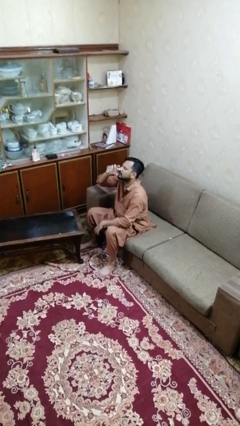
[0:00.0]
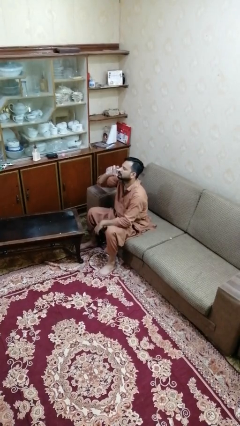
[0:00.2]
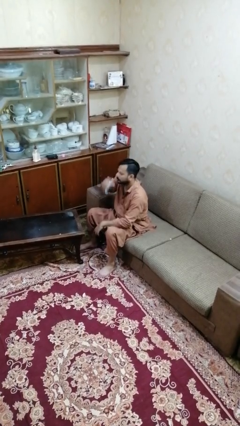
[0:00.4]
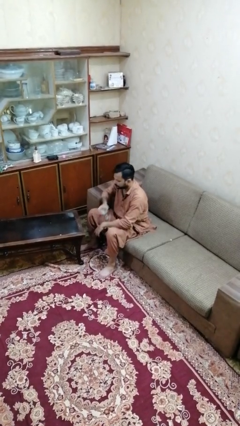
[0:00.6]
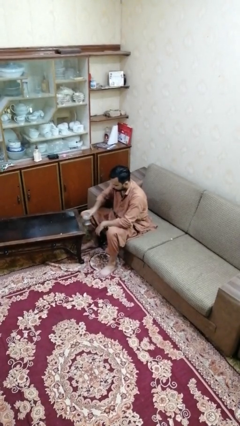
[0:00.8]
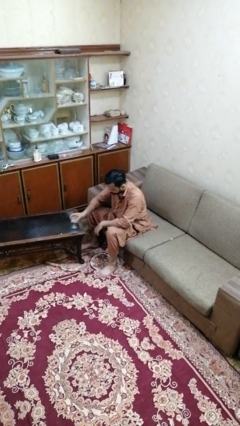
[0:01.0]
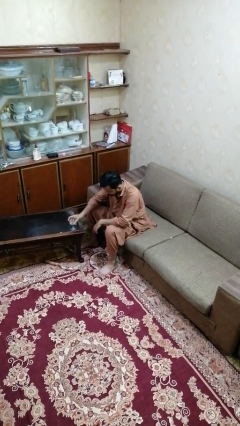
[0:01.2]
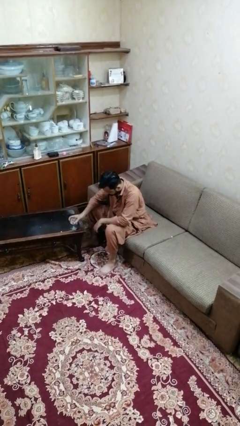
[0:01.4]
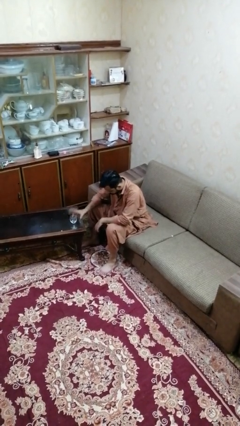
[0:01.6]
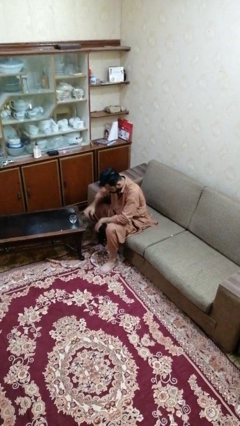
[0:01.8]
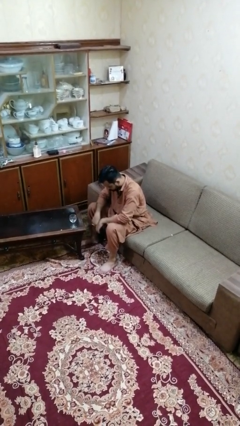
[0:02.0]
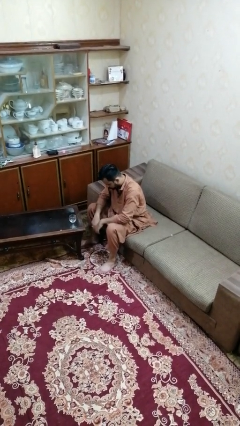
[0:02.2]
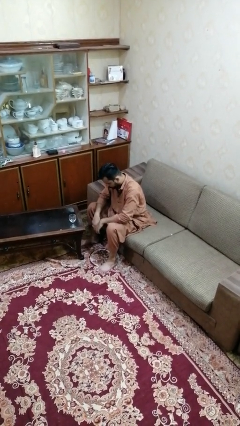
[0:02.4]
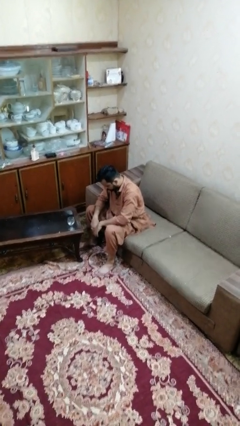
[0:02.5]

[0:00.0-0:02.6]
person puts down object on table

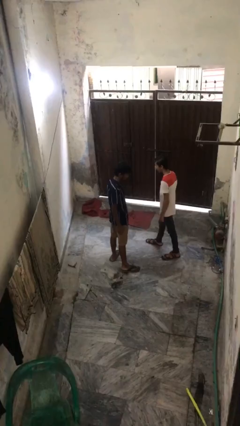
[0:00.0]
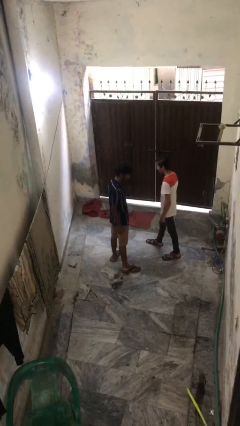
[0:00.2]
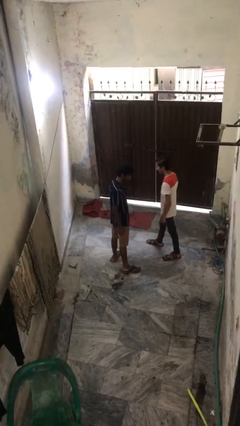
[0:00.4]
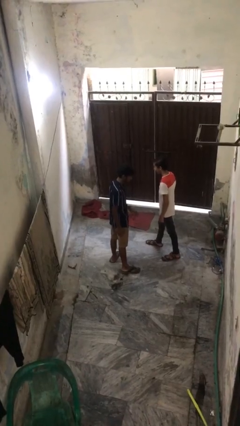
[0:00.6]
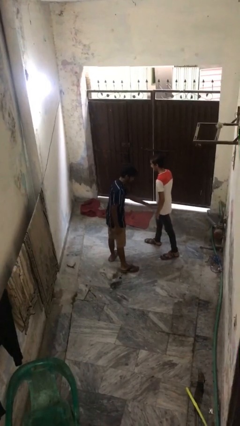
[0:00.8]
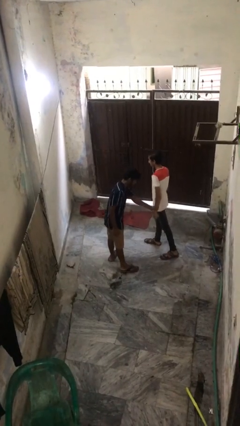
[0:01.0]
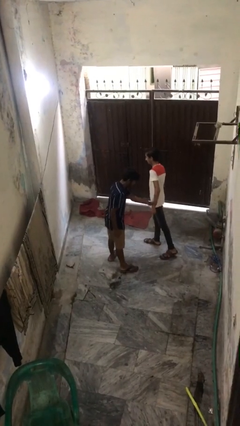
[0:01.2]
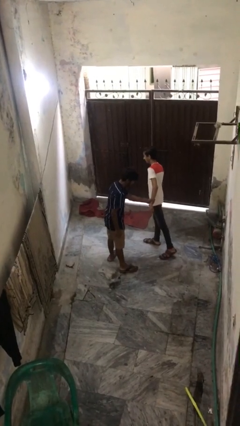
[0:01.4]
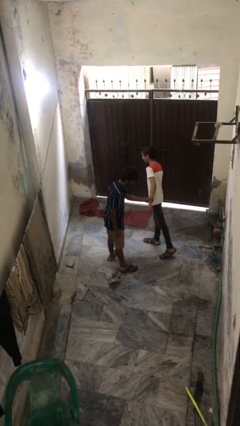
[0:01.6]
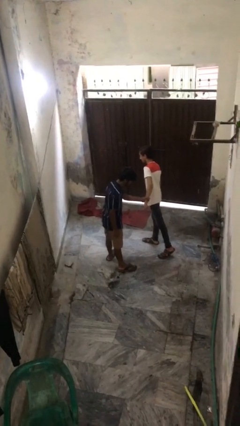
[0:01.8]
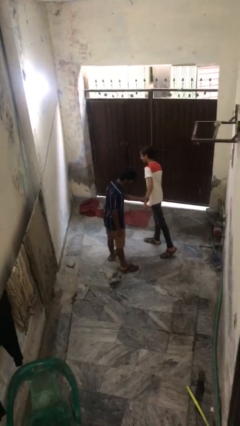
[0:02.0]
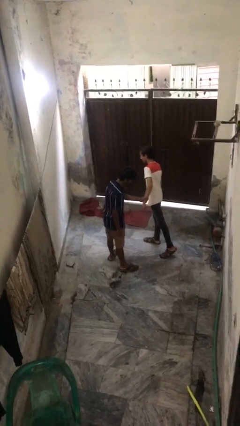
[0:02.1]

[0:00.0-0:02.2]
person grabs person by forearm

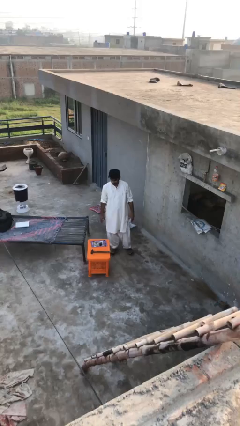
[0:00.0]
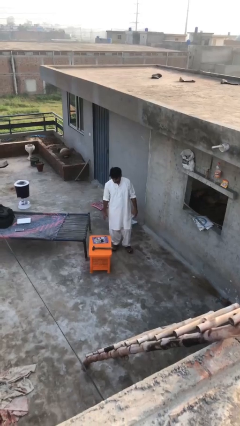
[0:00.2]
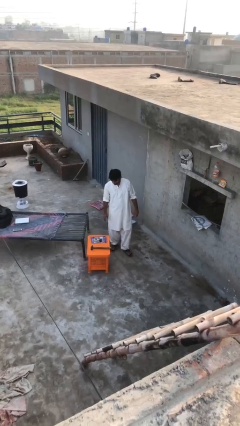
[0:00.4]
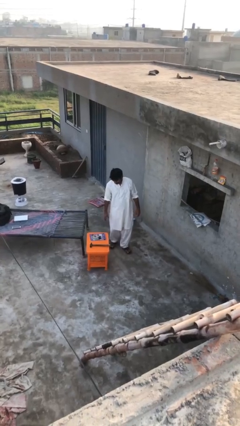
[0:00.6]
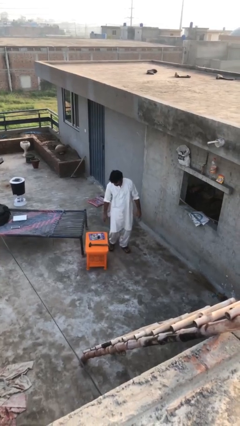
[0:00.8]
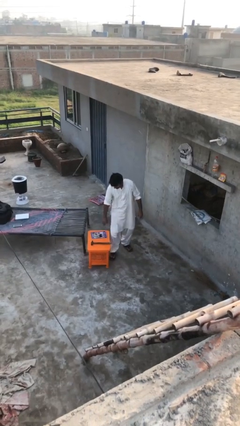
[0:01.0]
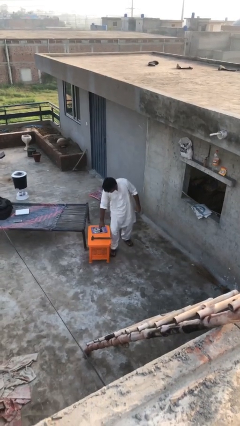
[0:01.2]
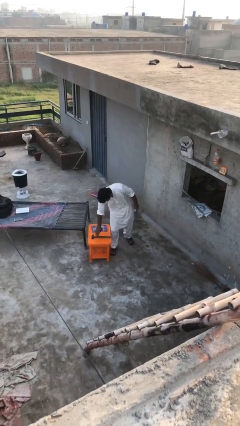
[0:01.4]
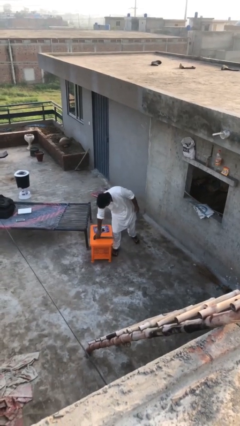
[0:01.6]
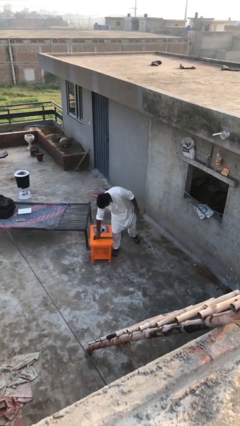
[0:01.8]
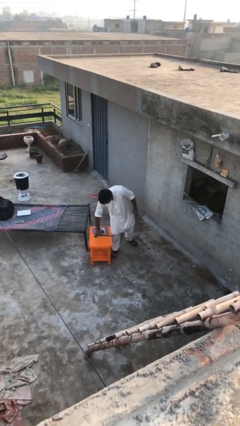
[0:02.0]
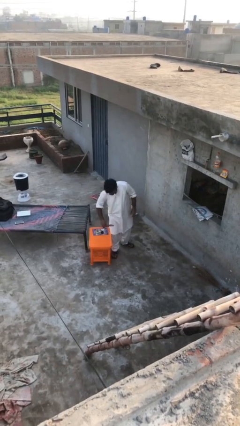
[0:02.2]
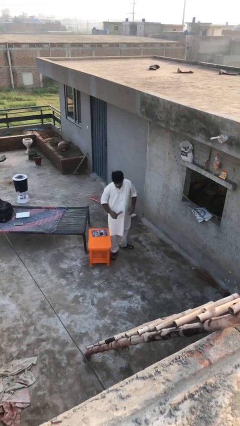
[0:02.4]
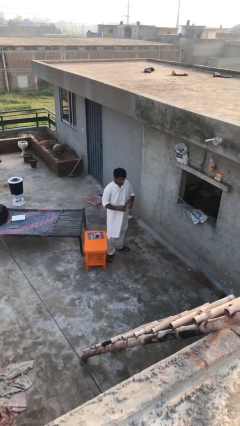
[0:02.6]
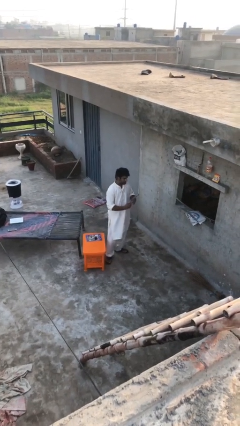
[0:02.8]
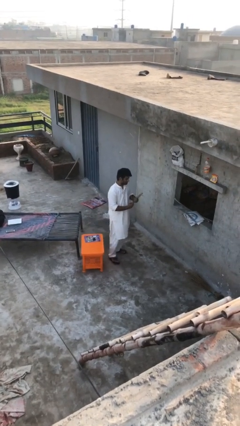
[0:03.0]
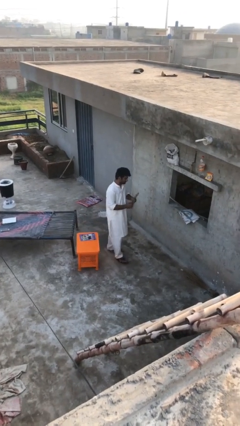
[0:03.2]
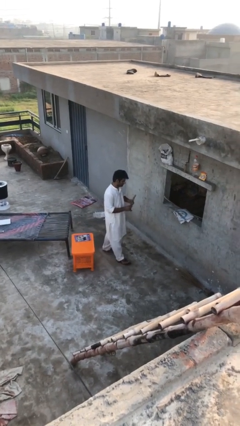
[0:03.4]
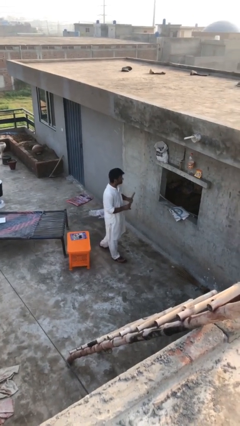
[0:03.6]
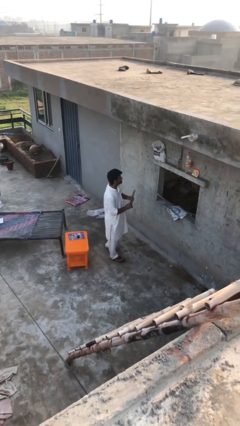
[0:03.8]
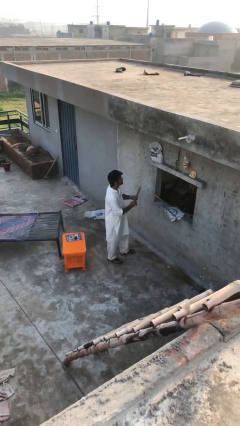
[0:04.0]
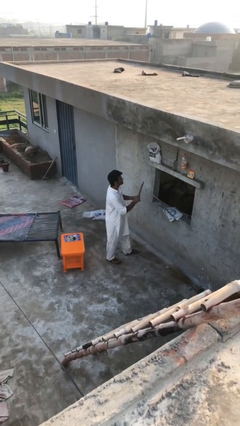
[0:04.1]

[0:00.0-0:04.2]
person picks up object from table

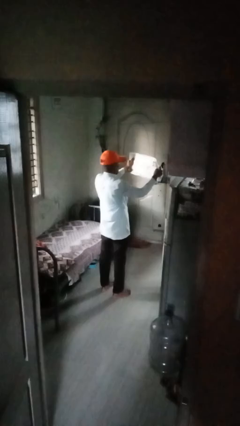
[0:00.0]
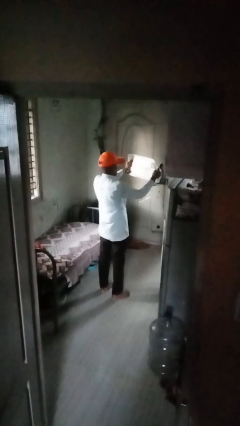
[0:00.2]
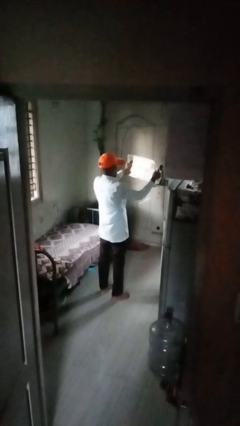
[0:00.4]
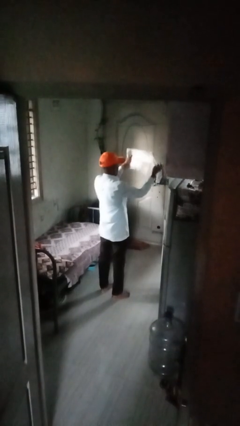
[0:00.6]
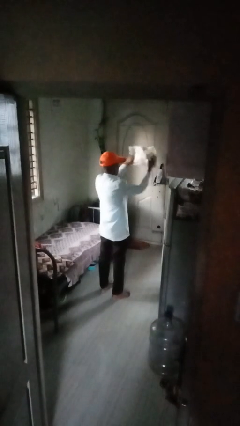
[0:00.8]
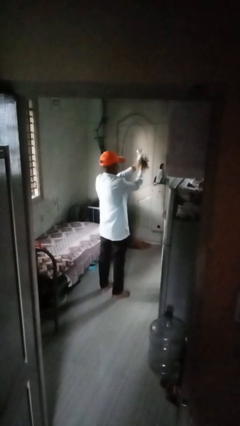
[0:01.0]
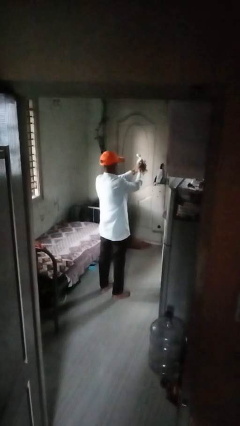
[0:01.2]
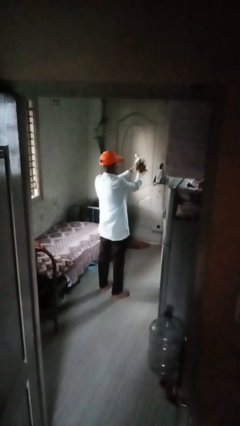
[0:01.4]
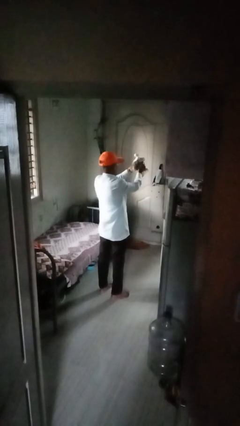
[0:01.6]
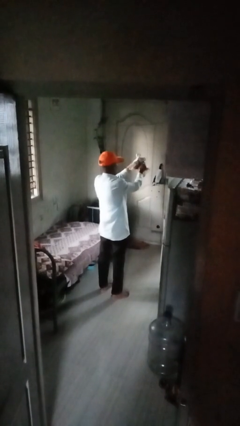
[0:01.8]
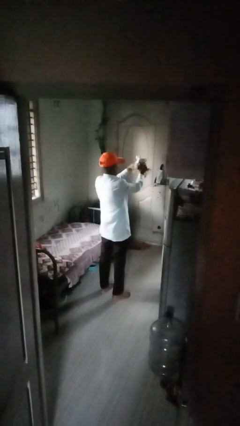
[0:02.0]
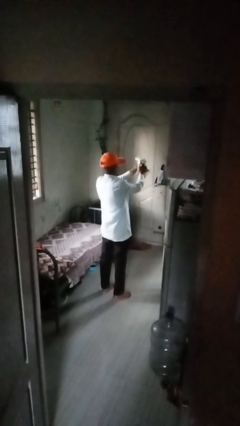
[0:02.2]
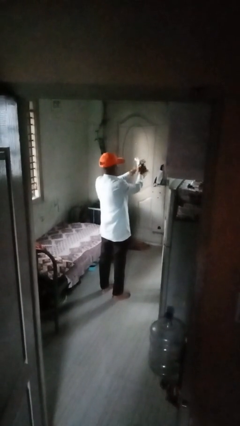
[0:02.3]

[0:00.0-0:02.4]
person crumples paper

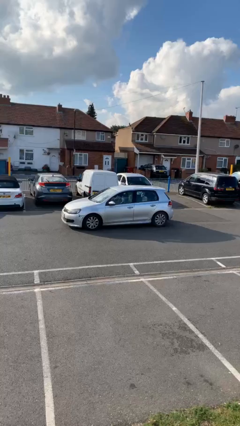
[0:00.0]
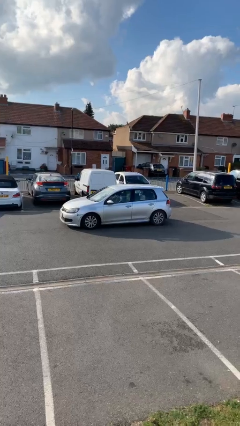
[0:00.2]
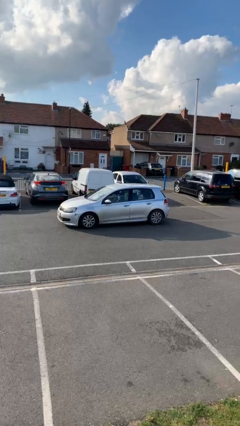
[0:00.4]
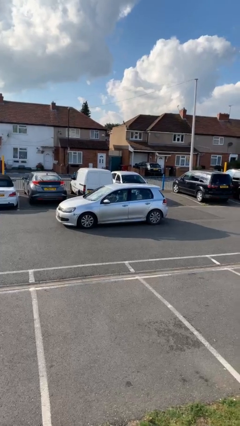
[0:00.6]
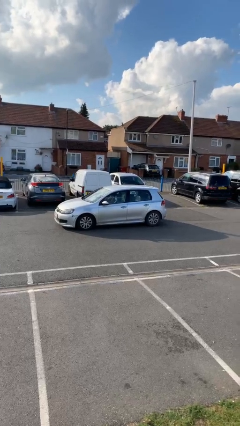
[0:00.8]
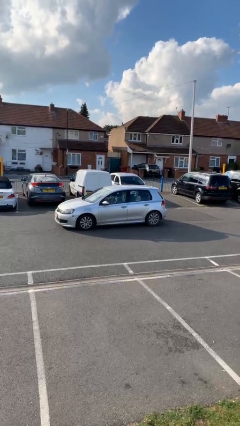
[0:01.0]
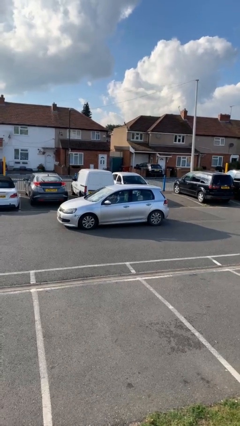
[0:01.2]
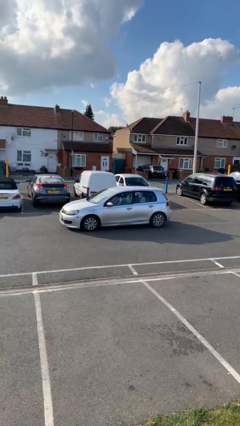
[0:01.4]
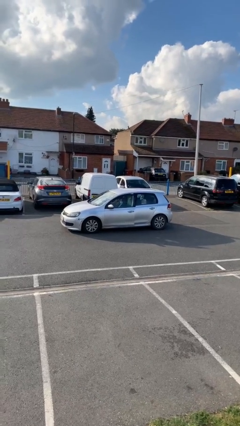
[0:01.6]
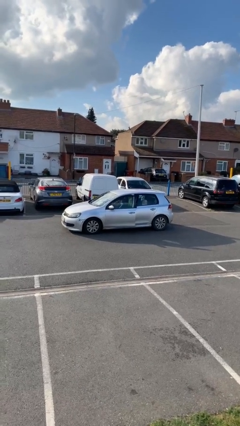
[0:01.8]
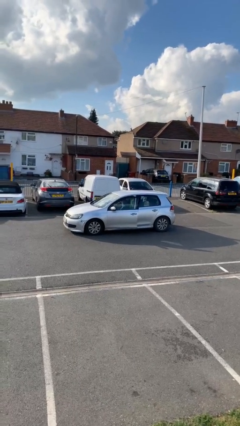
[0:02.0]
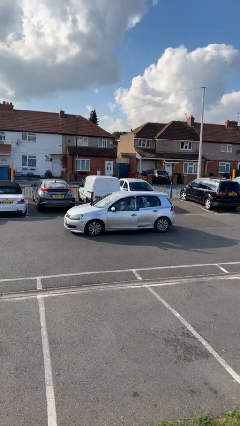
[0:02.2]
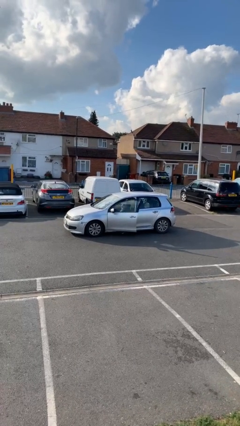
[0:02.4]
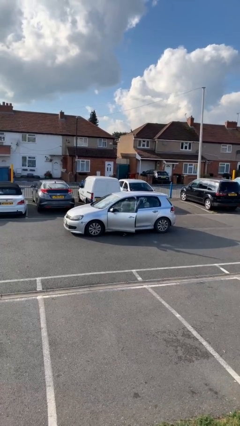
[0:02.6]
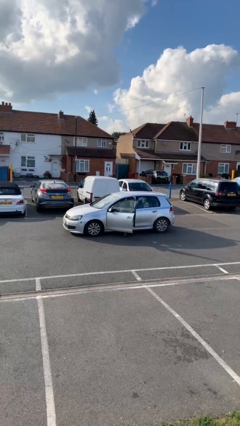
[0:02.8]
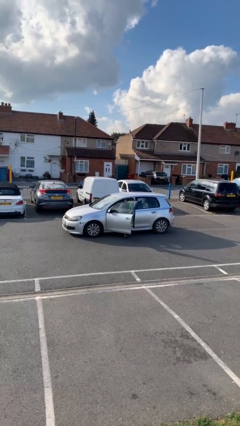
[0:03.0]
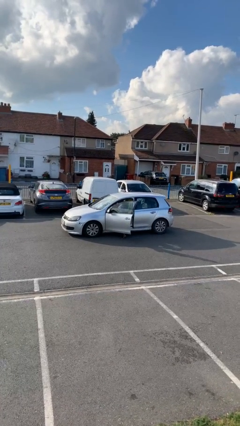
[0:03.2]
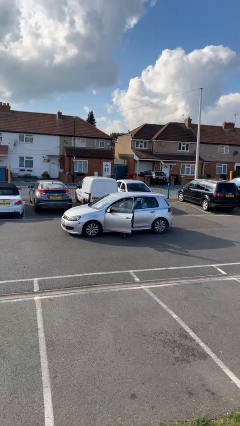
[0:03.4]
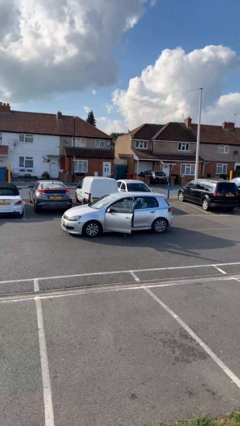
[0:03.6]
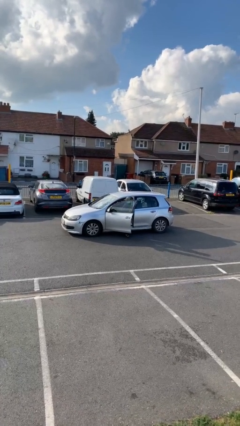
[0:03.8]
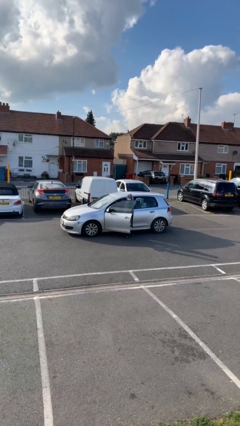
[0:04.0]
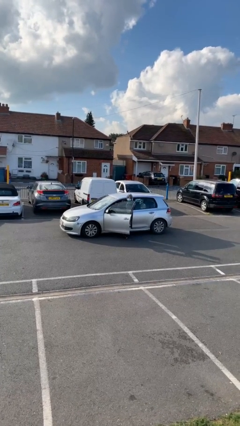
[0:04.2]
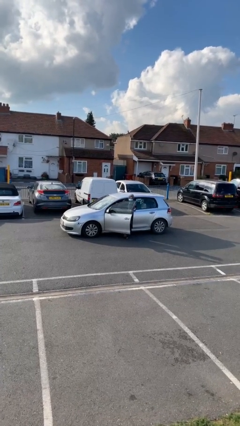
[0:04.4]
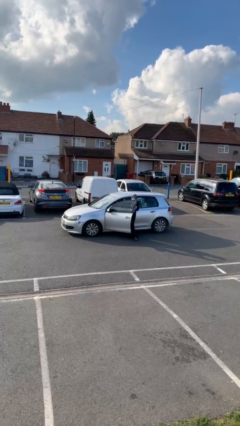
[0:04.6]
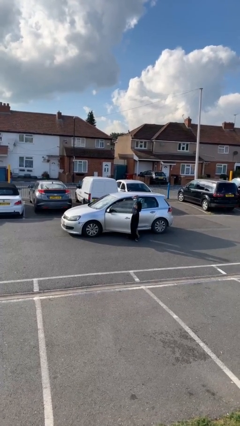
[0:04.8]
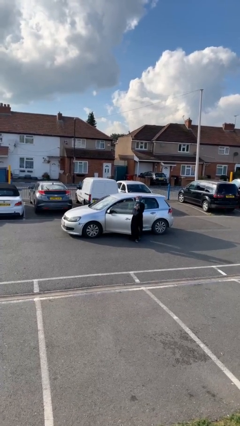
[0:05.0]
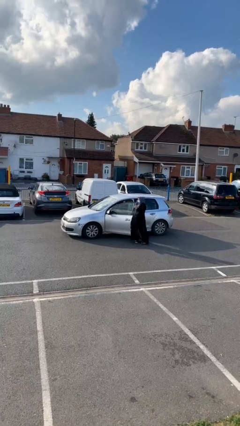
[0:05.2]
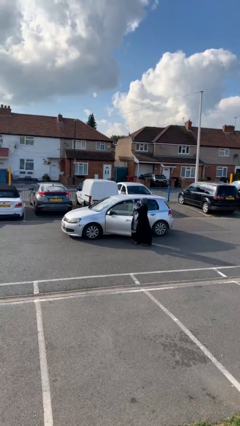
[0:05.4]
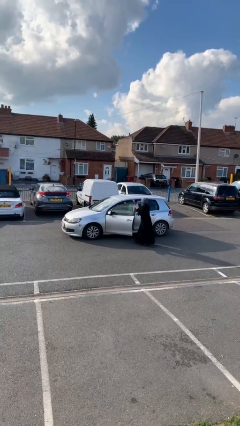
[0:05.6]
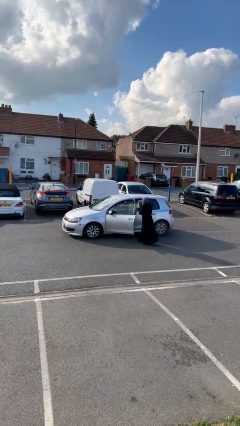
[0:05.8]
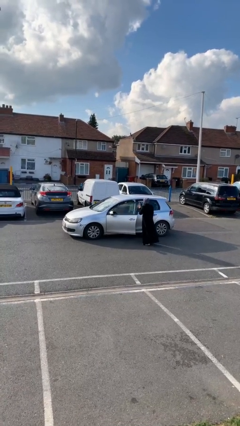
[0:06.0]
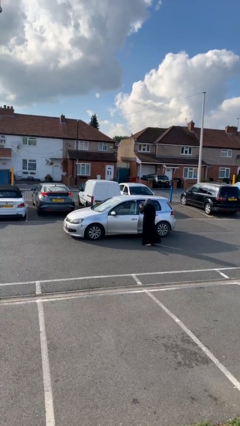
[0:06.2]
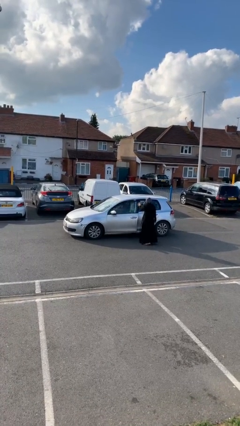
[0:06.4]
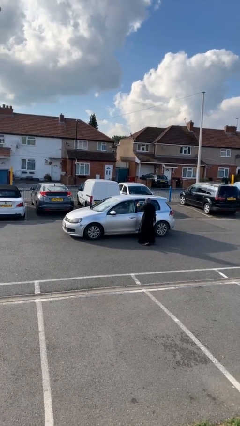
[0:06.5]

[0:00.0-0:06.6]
car drops off person
